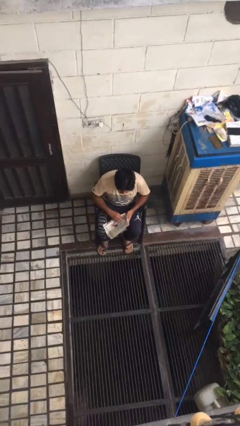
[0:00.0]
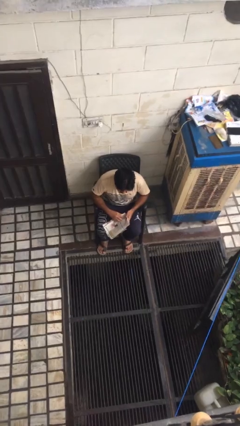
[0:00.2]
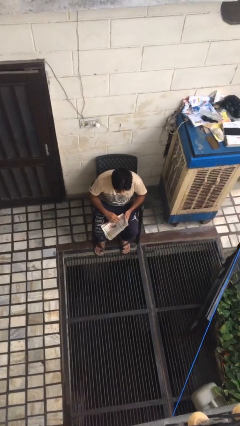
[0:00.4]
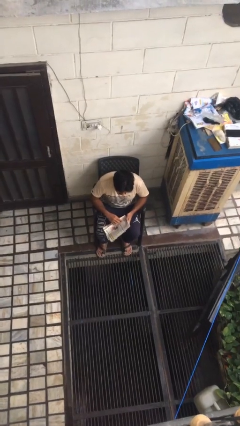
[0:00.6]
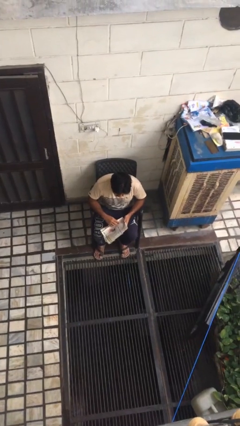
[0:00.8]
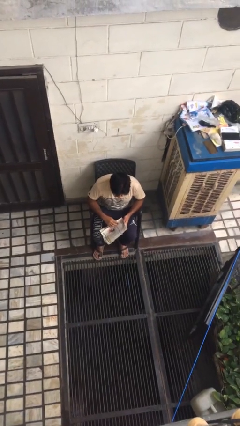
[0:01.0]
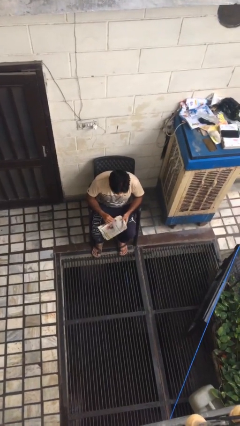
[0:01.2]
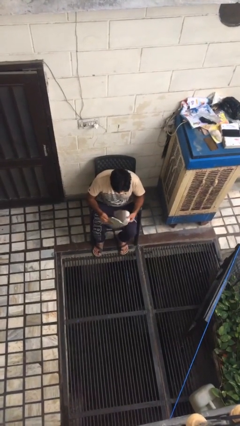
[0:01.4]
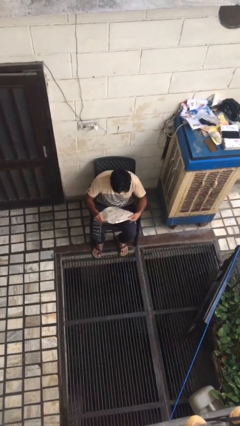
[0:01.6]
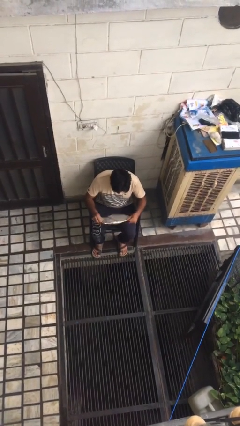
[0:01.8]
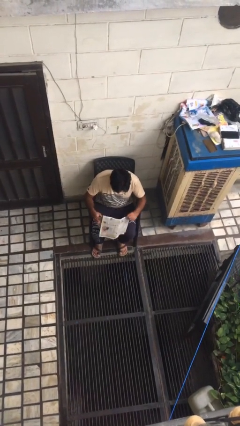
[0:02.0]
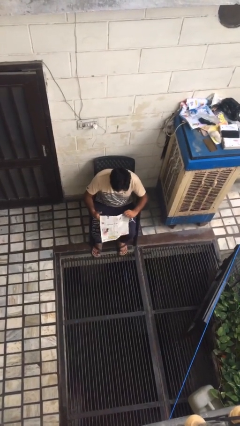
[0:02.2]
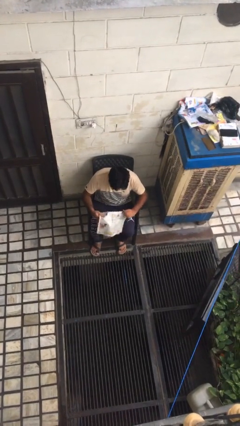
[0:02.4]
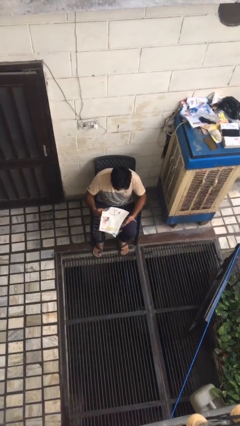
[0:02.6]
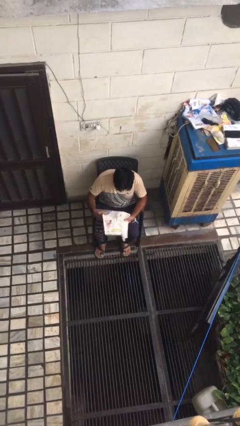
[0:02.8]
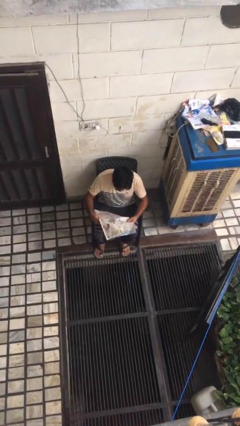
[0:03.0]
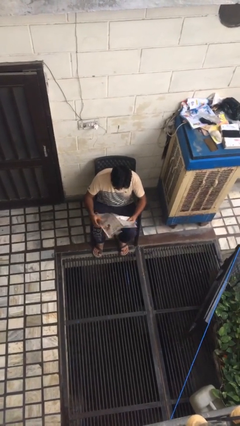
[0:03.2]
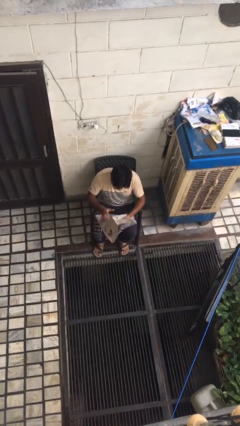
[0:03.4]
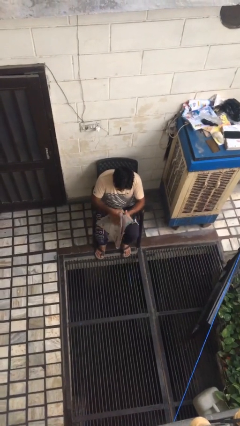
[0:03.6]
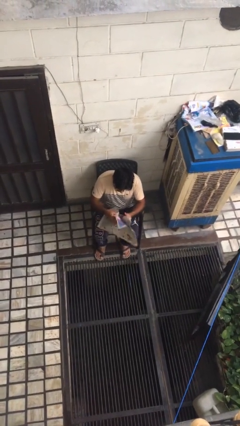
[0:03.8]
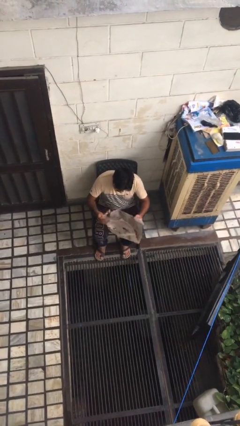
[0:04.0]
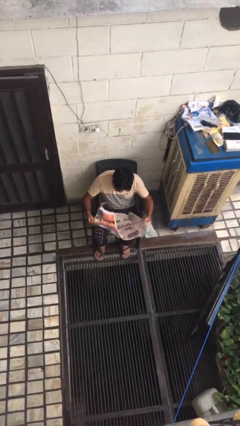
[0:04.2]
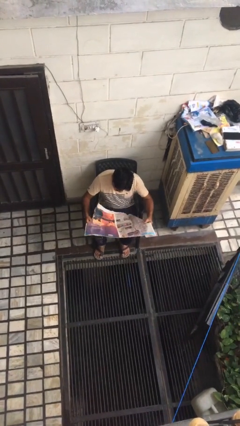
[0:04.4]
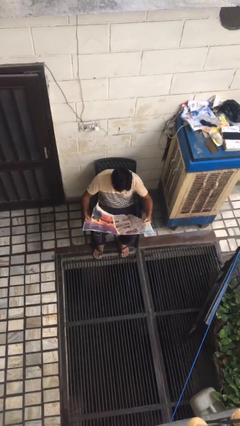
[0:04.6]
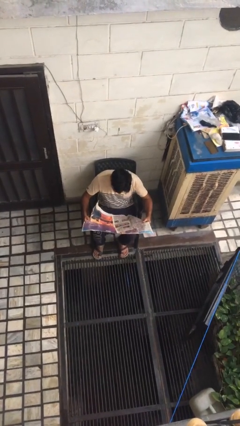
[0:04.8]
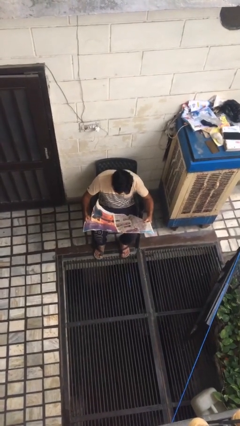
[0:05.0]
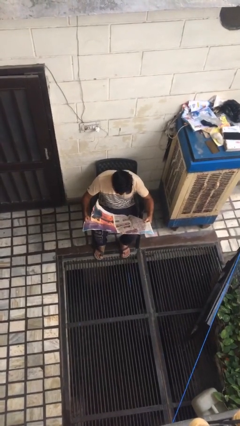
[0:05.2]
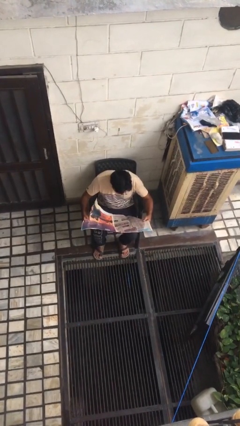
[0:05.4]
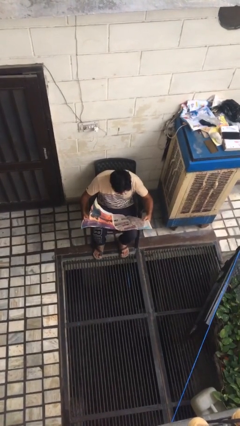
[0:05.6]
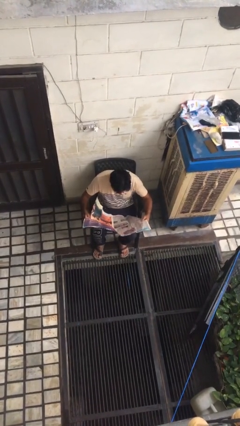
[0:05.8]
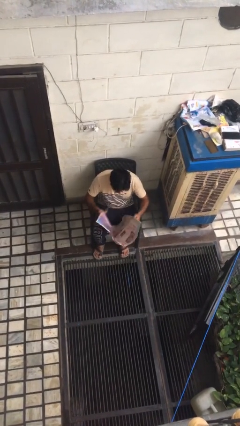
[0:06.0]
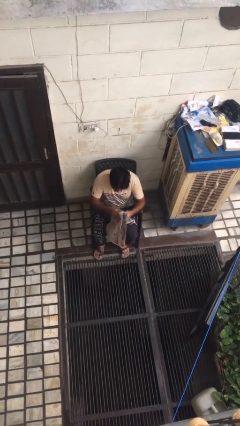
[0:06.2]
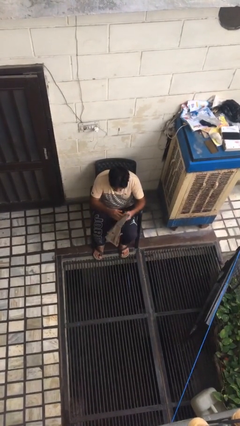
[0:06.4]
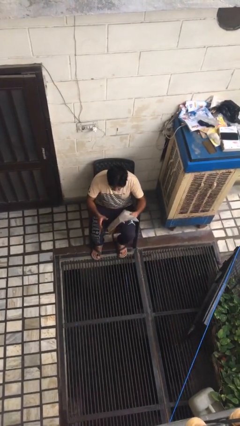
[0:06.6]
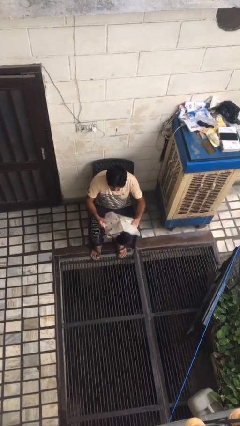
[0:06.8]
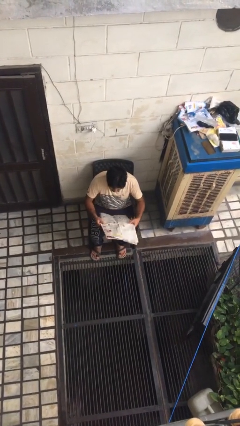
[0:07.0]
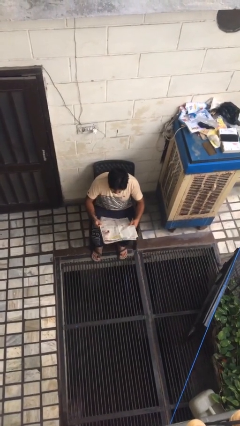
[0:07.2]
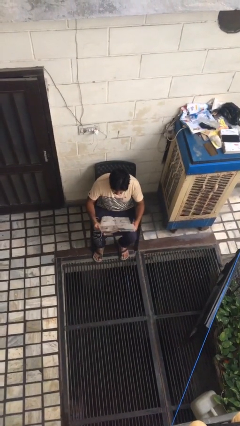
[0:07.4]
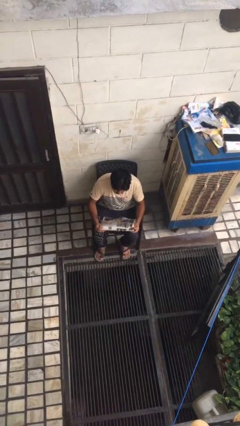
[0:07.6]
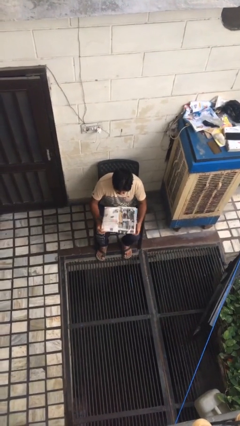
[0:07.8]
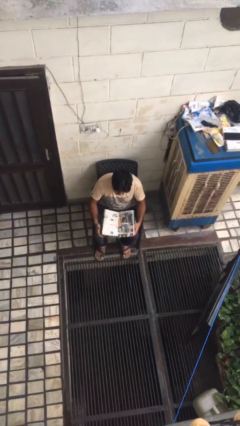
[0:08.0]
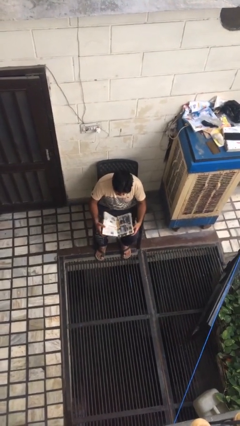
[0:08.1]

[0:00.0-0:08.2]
person reads newspaper

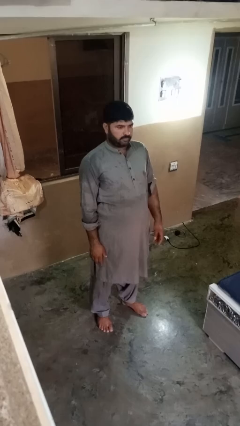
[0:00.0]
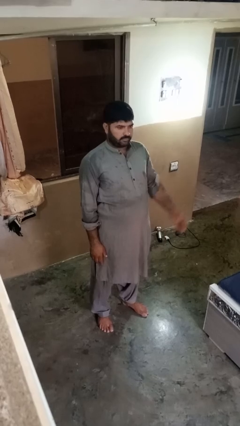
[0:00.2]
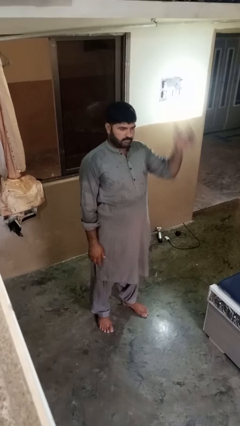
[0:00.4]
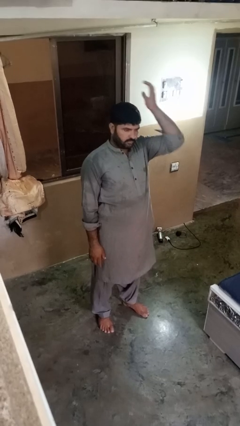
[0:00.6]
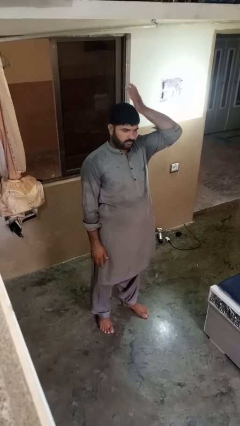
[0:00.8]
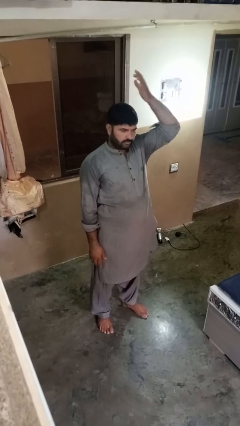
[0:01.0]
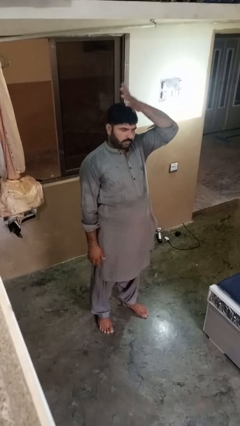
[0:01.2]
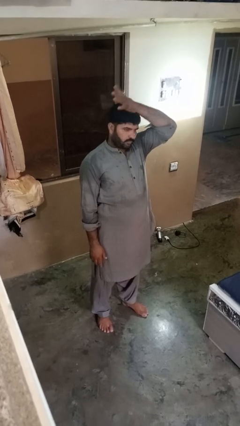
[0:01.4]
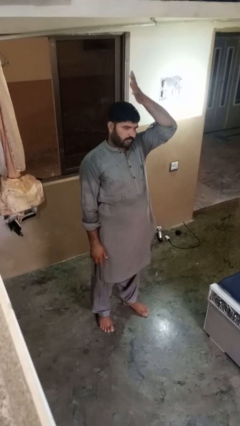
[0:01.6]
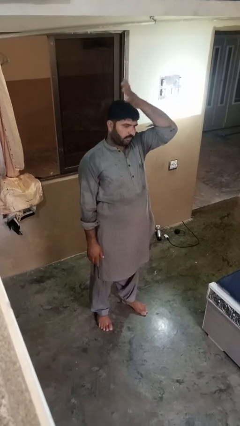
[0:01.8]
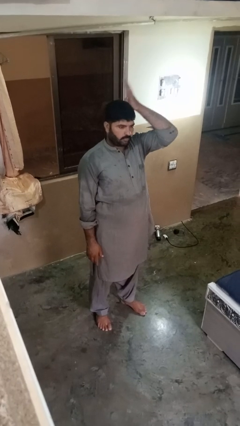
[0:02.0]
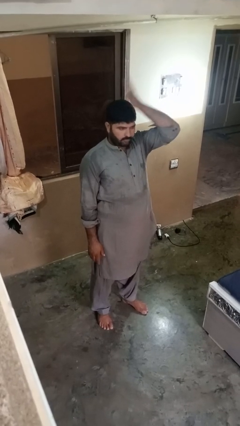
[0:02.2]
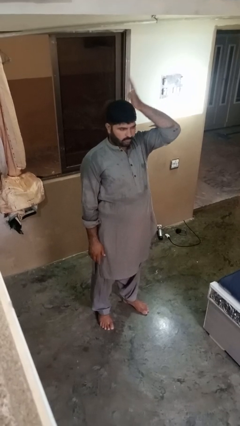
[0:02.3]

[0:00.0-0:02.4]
person pats head

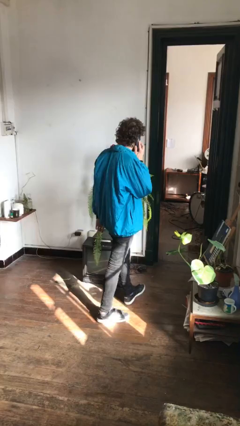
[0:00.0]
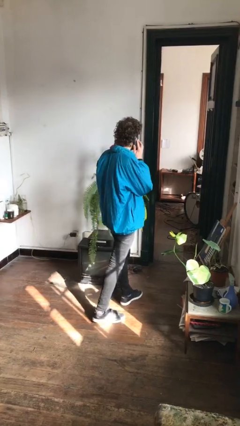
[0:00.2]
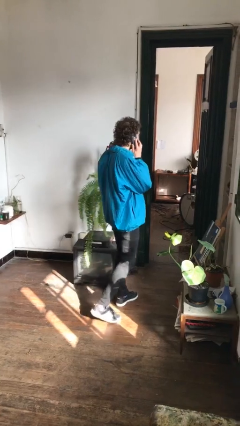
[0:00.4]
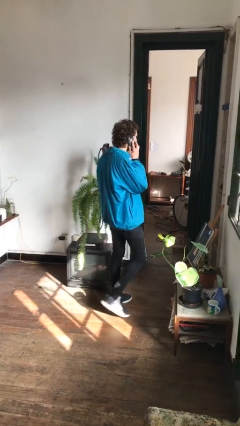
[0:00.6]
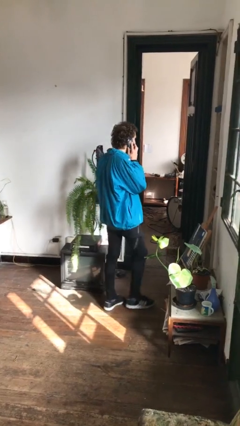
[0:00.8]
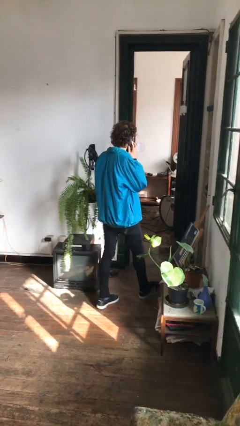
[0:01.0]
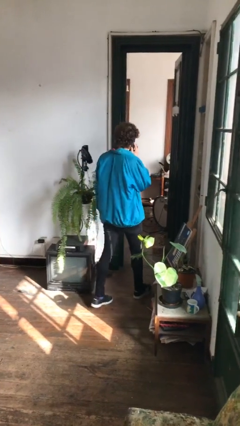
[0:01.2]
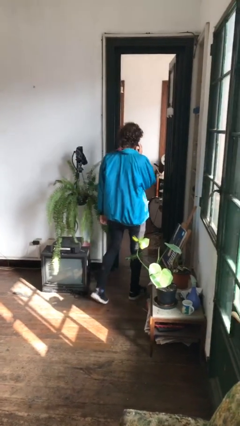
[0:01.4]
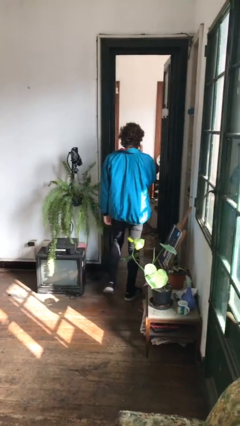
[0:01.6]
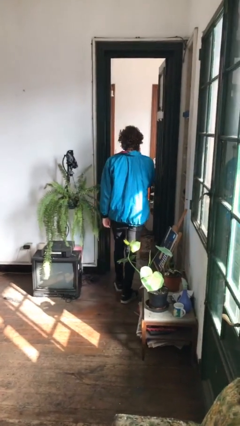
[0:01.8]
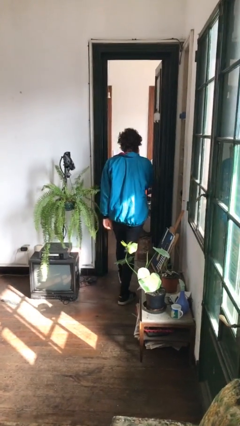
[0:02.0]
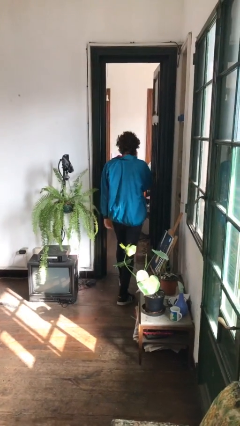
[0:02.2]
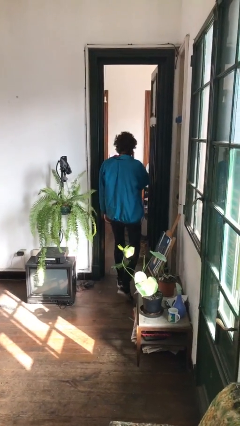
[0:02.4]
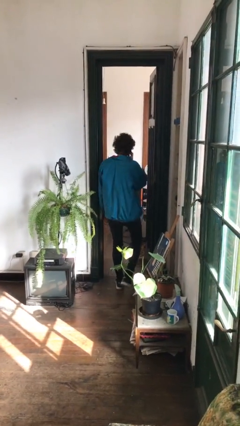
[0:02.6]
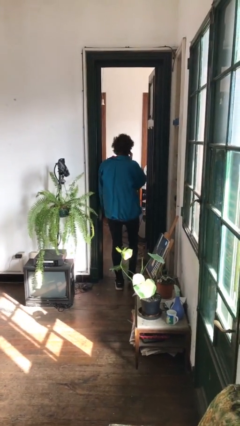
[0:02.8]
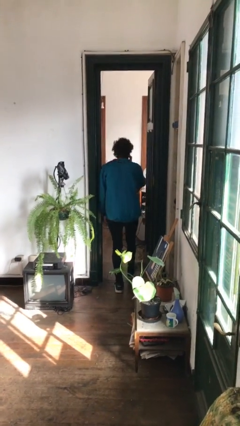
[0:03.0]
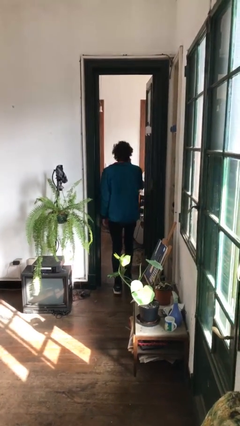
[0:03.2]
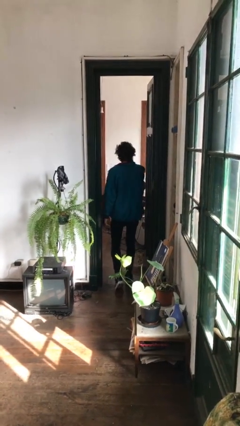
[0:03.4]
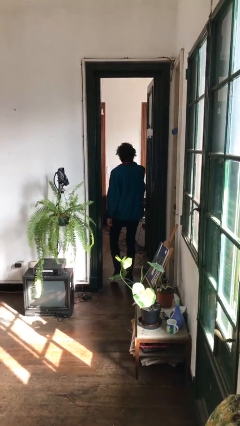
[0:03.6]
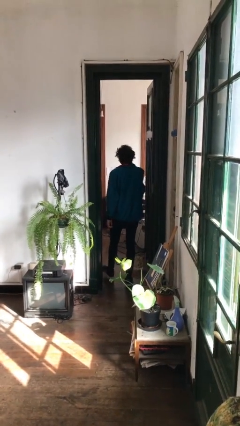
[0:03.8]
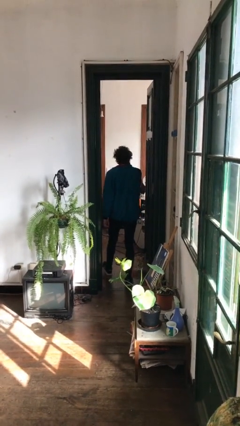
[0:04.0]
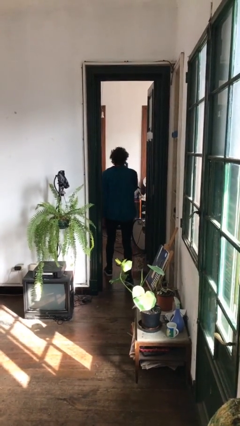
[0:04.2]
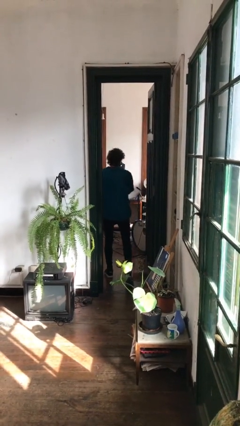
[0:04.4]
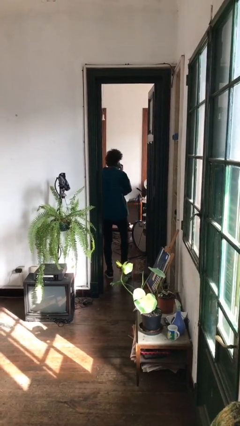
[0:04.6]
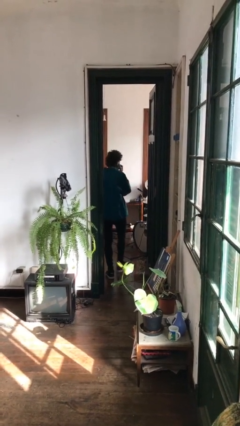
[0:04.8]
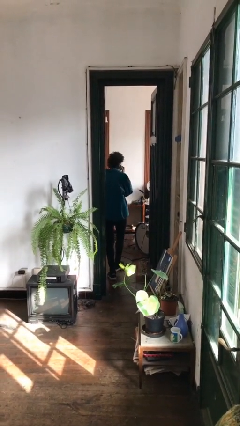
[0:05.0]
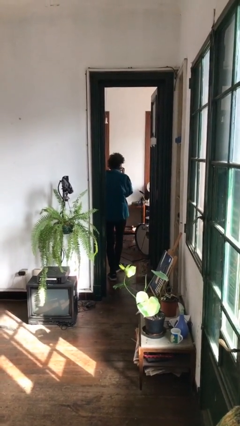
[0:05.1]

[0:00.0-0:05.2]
person exits scene through structure

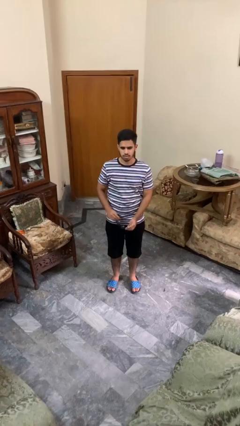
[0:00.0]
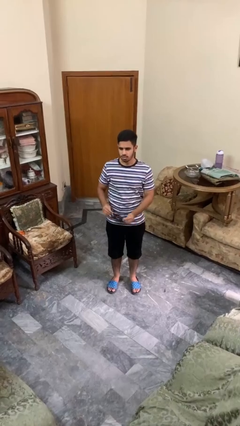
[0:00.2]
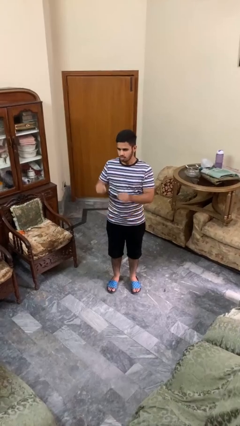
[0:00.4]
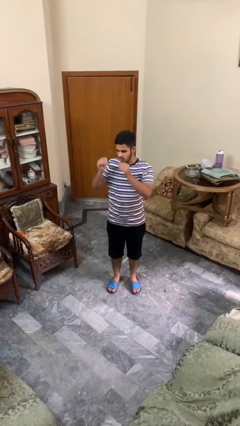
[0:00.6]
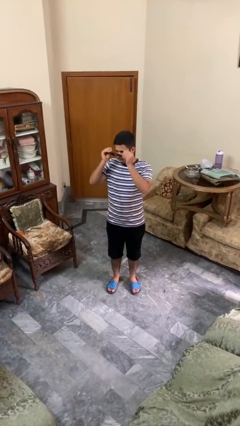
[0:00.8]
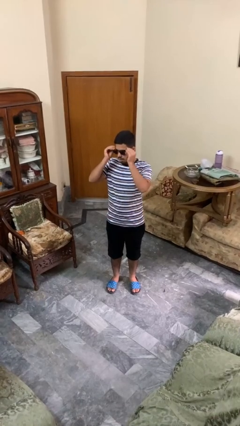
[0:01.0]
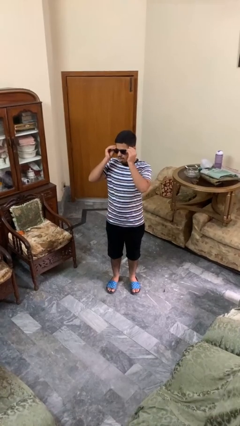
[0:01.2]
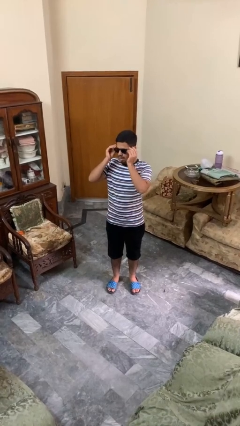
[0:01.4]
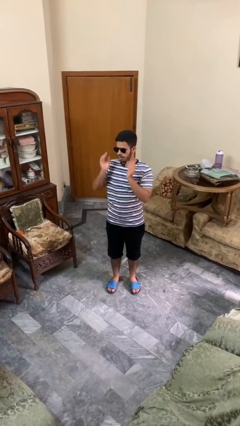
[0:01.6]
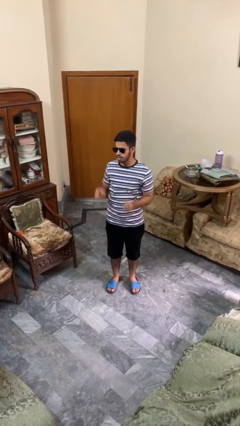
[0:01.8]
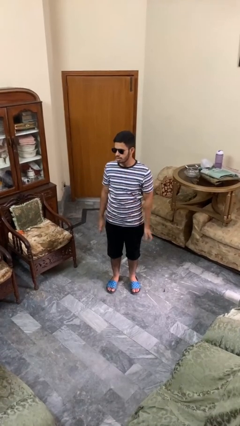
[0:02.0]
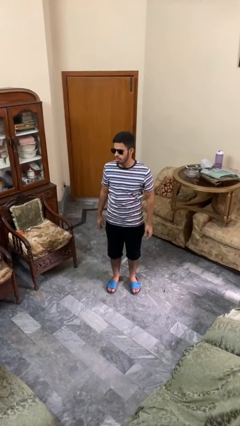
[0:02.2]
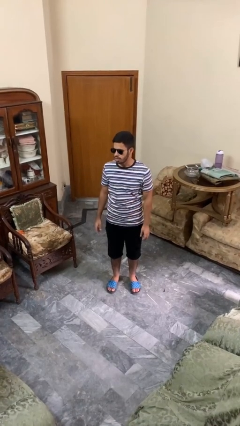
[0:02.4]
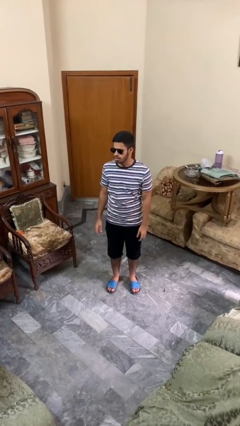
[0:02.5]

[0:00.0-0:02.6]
person puts on sunglasses
